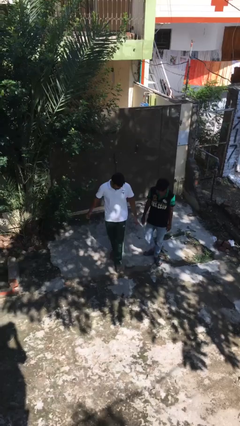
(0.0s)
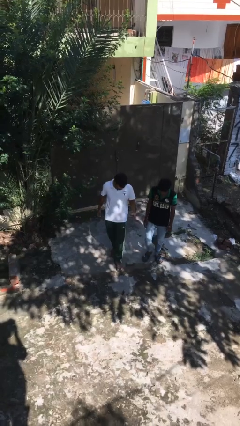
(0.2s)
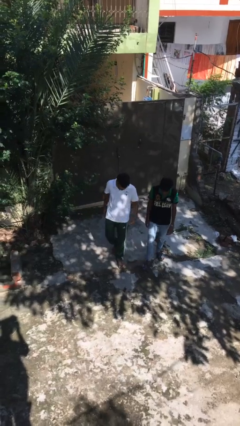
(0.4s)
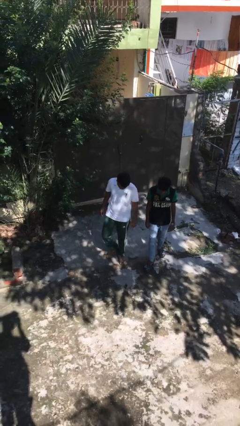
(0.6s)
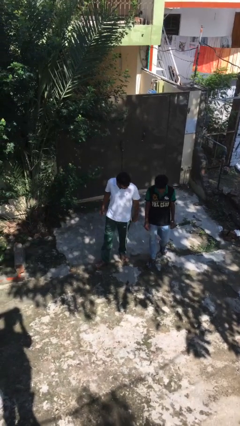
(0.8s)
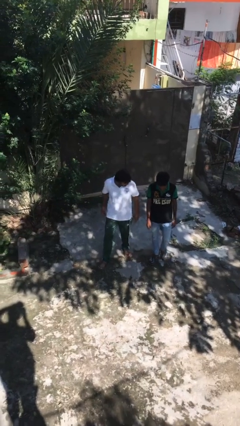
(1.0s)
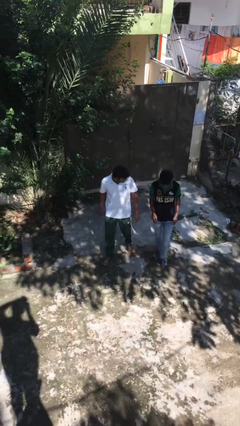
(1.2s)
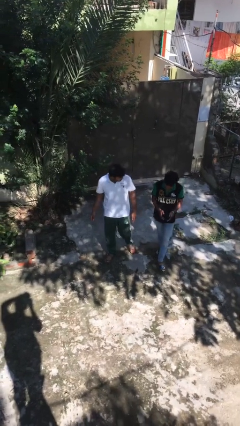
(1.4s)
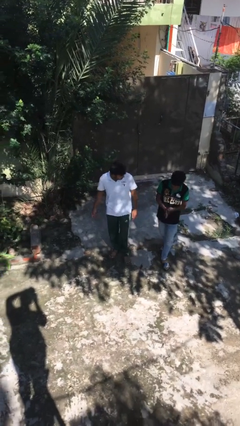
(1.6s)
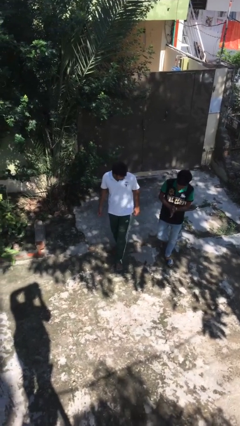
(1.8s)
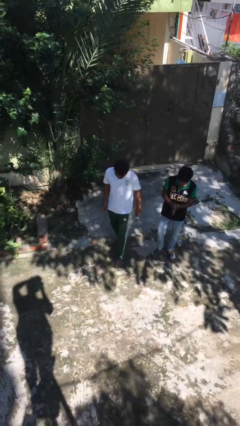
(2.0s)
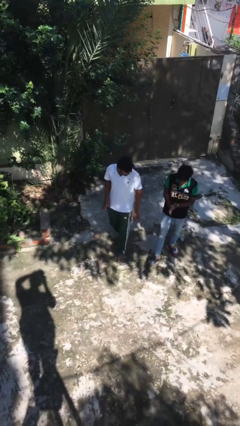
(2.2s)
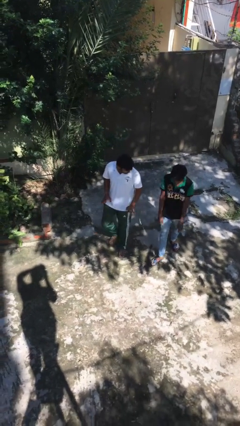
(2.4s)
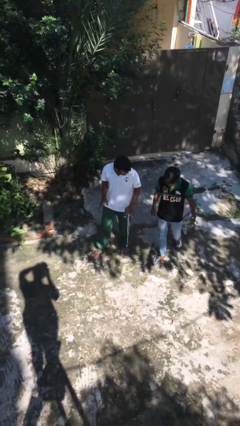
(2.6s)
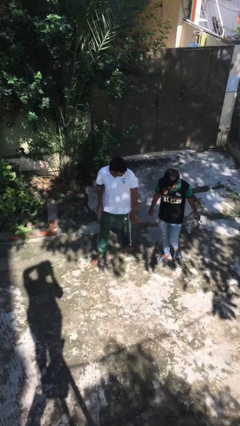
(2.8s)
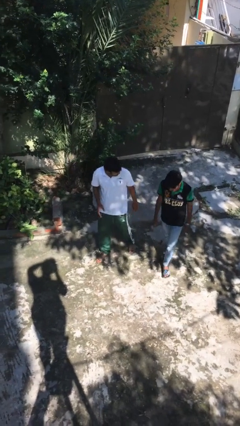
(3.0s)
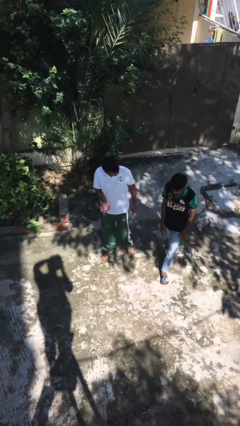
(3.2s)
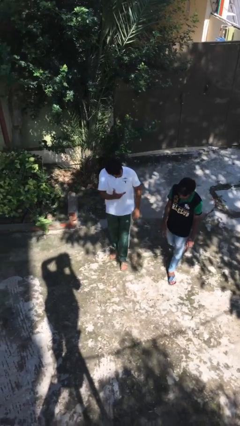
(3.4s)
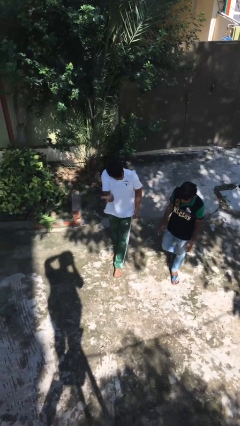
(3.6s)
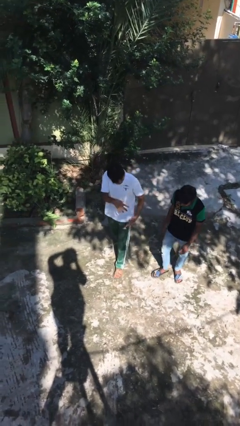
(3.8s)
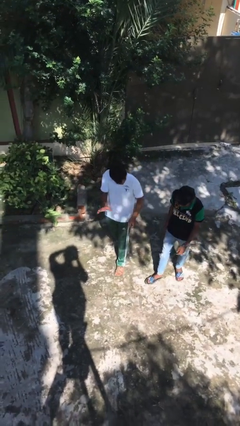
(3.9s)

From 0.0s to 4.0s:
person talks to person

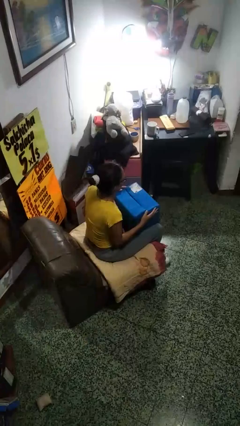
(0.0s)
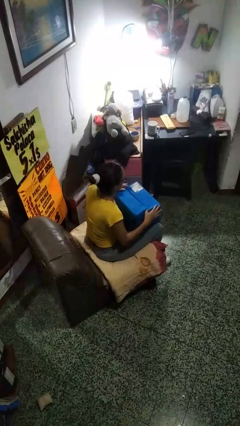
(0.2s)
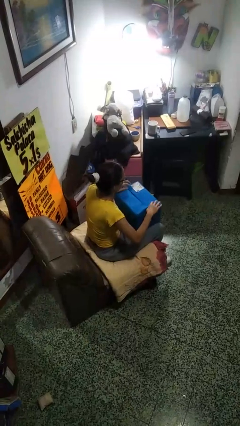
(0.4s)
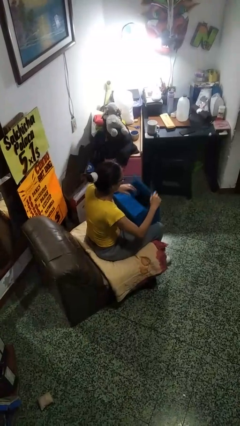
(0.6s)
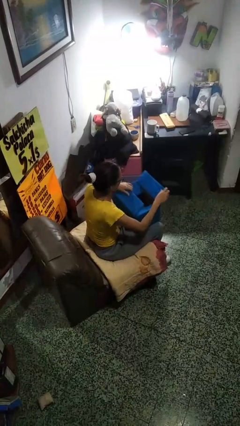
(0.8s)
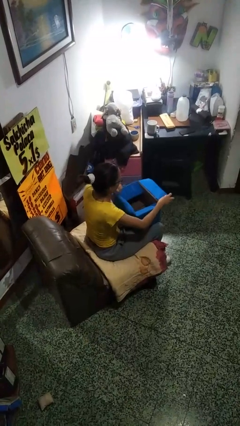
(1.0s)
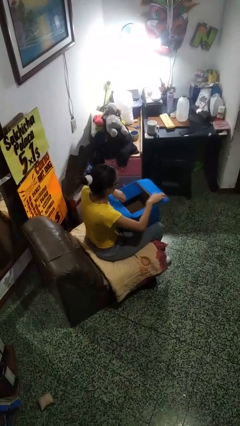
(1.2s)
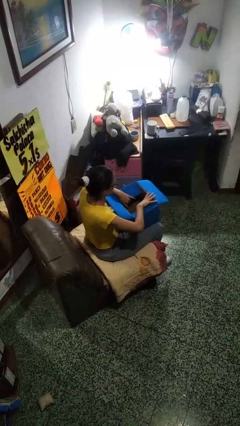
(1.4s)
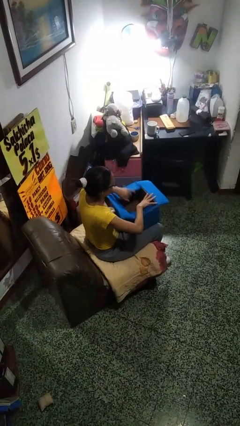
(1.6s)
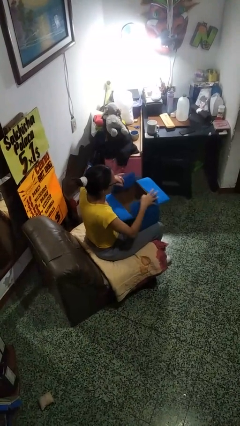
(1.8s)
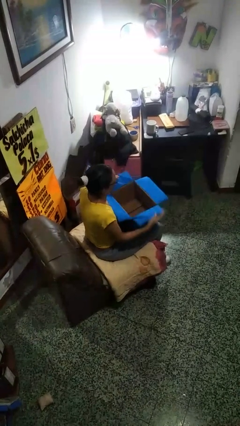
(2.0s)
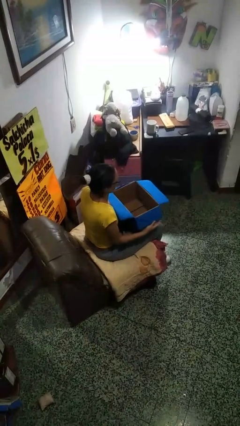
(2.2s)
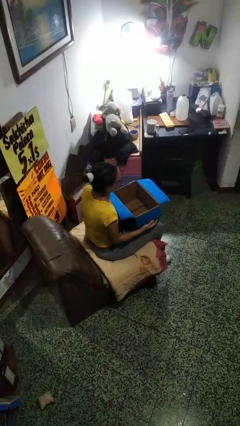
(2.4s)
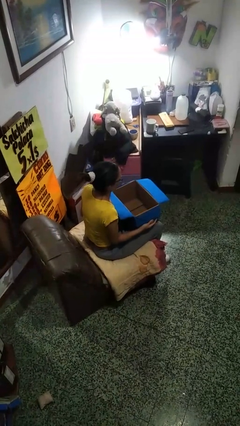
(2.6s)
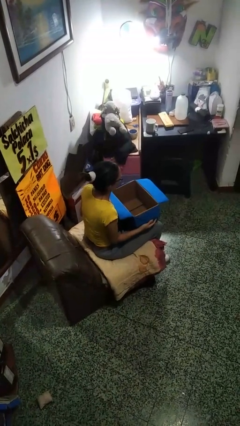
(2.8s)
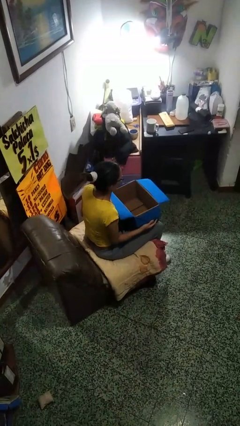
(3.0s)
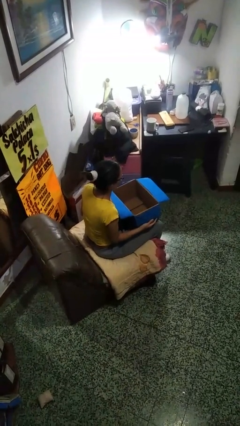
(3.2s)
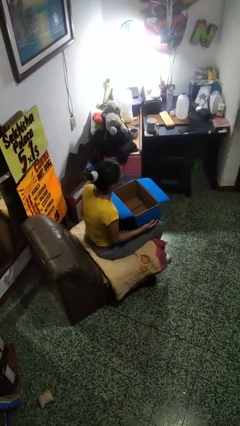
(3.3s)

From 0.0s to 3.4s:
person opens box

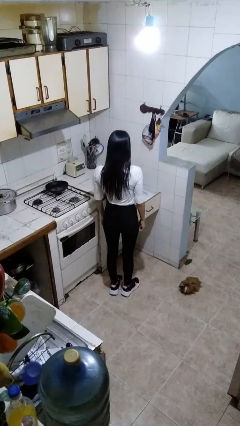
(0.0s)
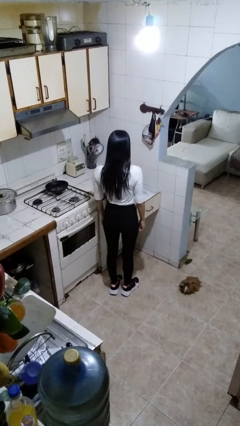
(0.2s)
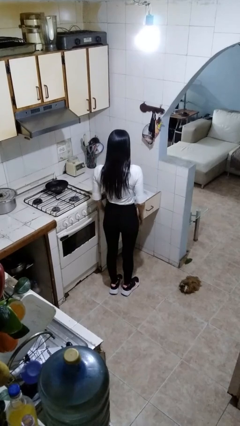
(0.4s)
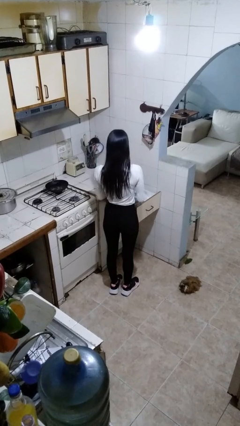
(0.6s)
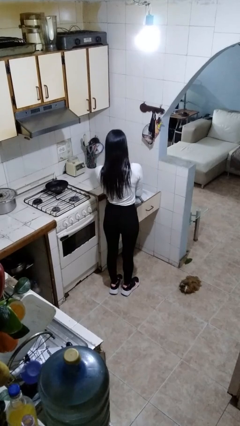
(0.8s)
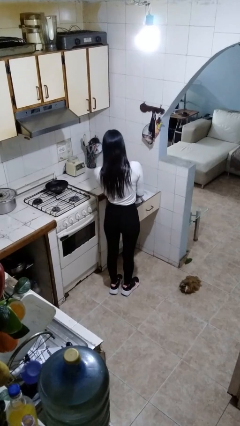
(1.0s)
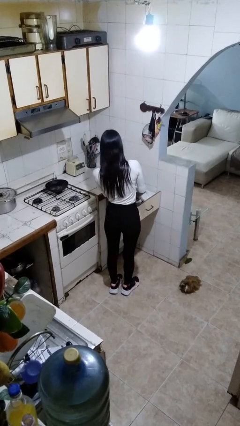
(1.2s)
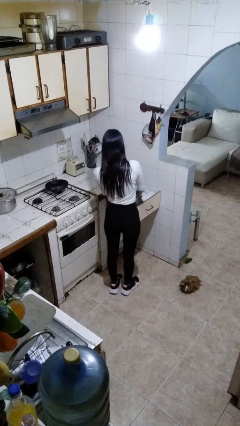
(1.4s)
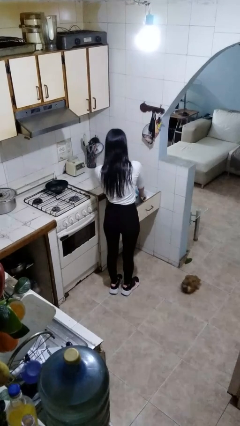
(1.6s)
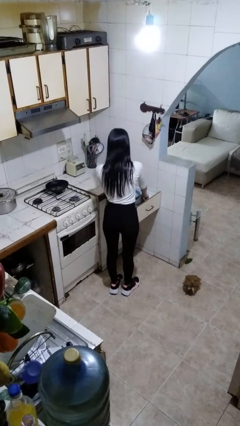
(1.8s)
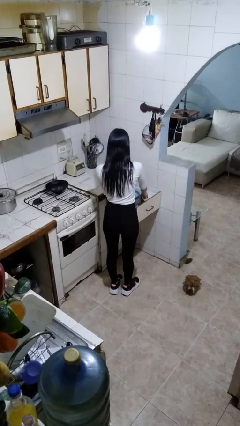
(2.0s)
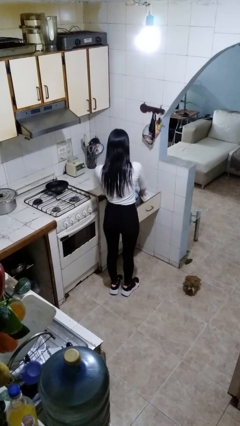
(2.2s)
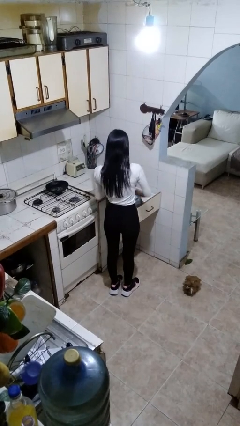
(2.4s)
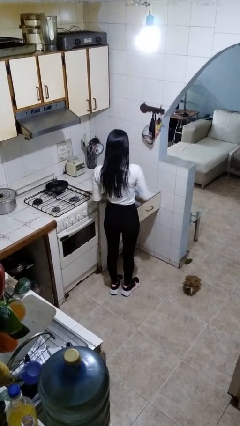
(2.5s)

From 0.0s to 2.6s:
person searches in kitchen drawer

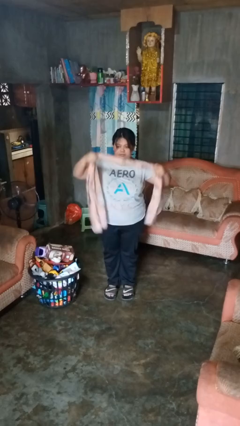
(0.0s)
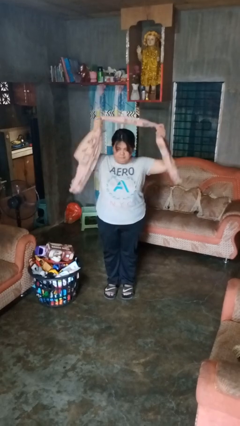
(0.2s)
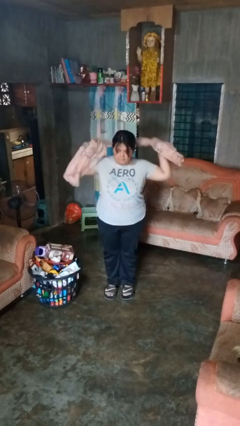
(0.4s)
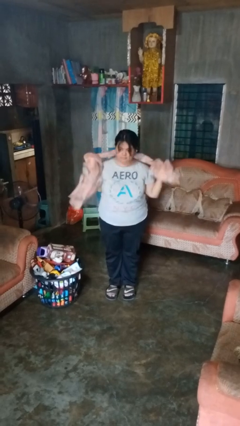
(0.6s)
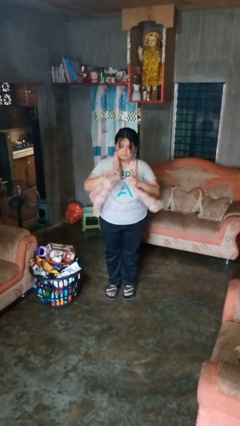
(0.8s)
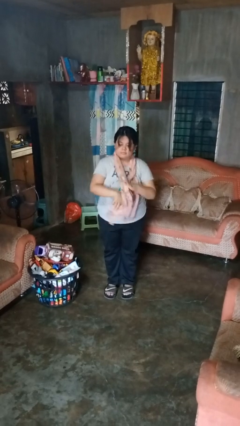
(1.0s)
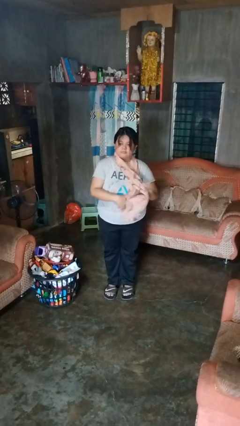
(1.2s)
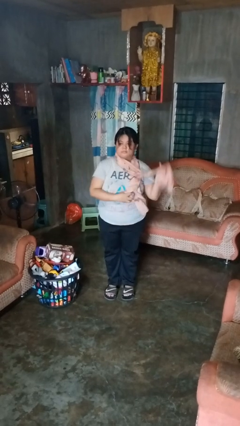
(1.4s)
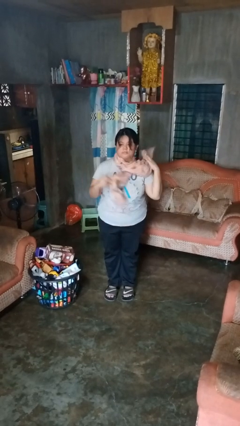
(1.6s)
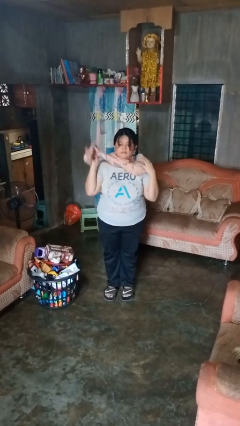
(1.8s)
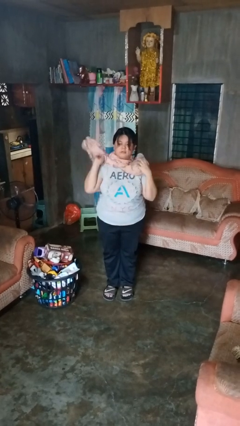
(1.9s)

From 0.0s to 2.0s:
person puts on scarf

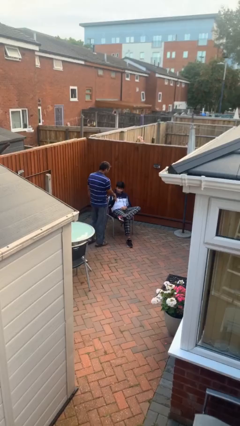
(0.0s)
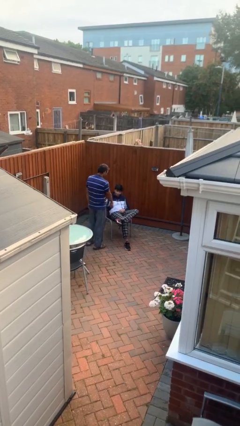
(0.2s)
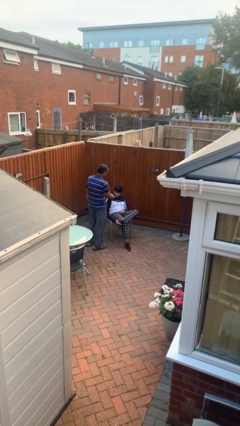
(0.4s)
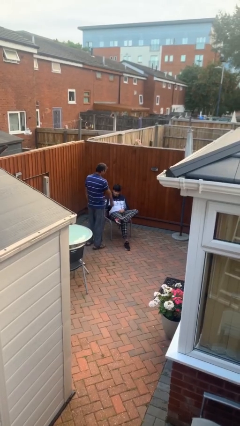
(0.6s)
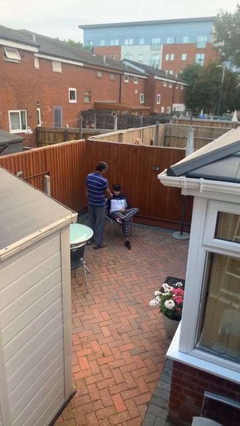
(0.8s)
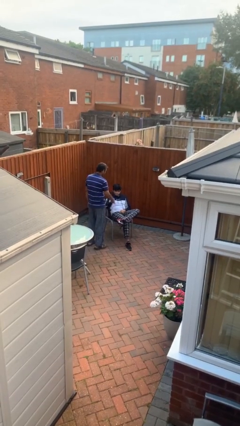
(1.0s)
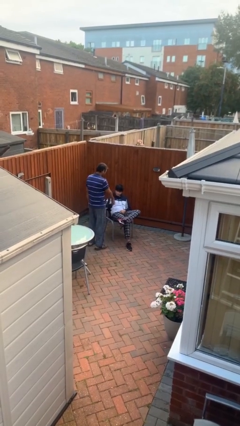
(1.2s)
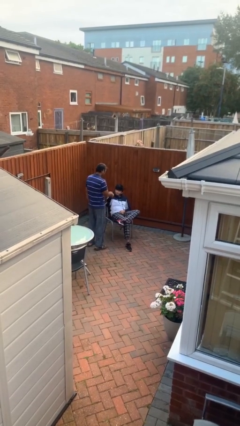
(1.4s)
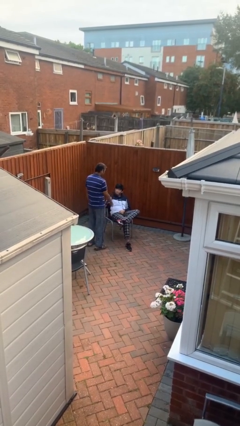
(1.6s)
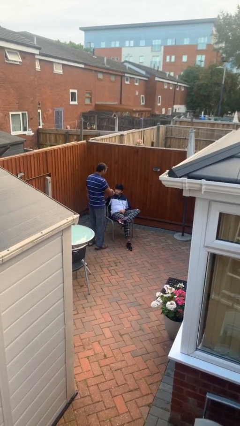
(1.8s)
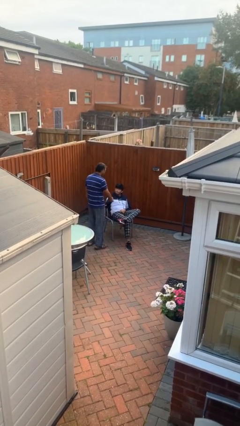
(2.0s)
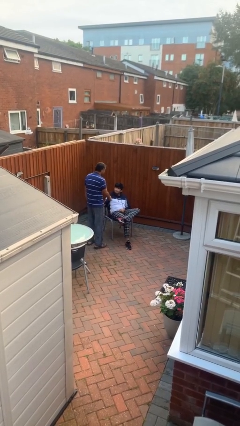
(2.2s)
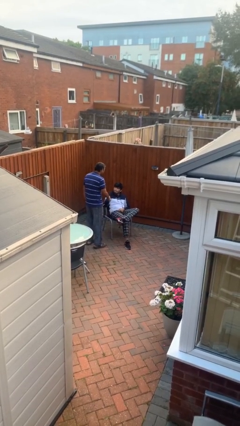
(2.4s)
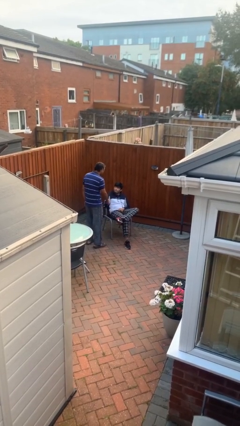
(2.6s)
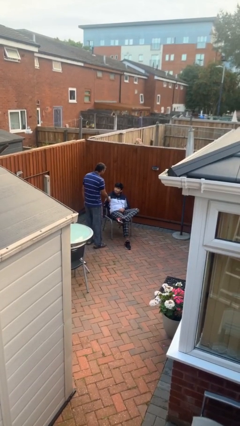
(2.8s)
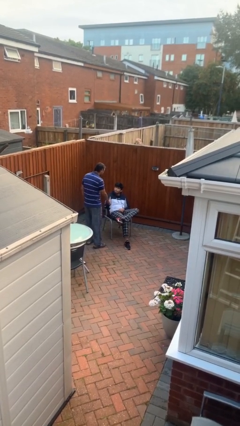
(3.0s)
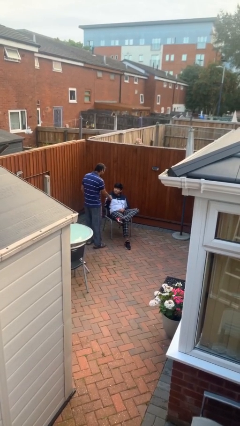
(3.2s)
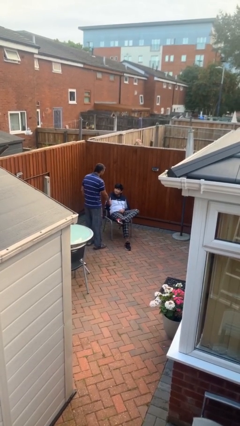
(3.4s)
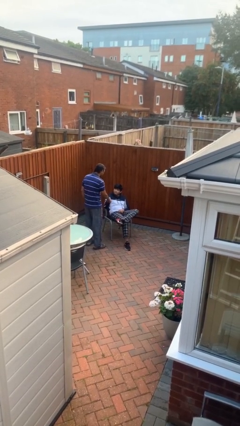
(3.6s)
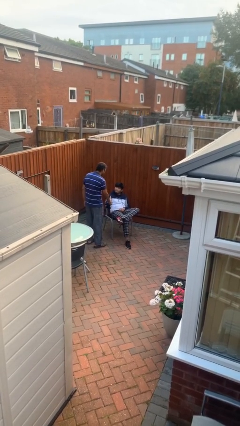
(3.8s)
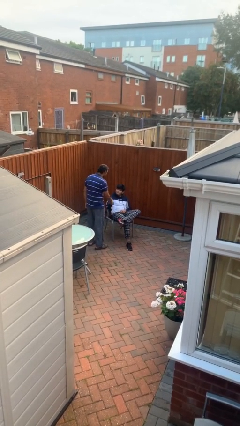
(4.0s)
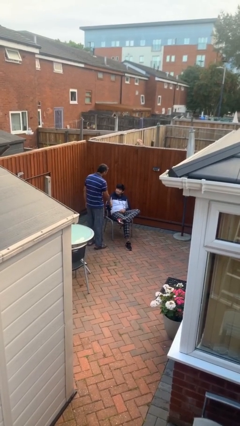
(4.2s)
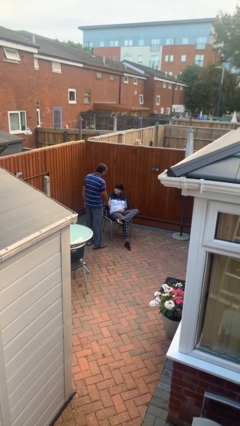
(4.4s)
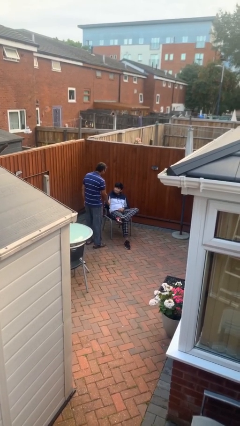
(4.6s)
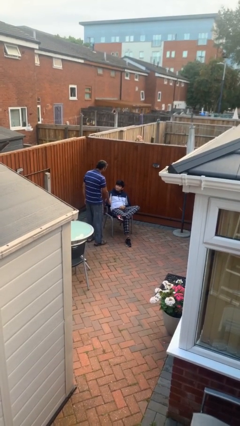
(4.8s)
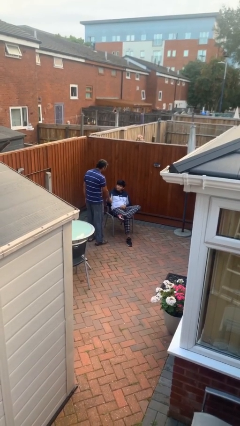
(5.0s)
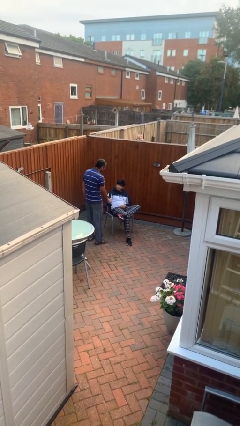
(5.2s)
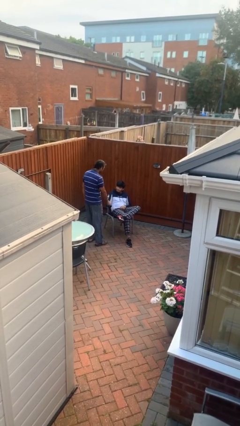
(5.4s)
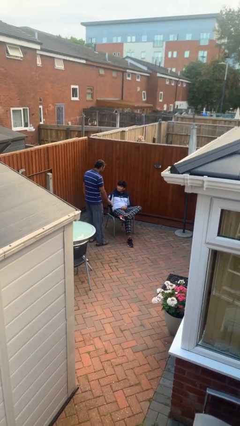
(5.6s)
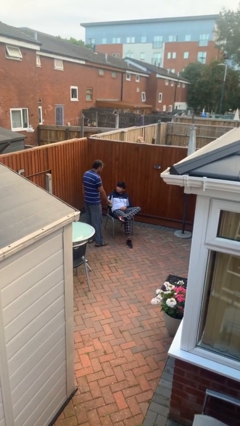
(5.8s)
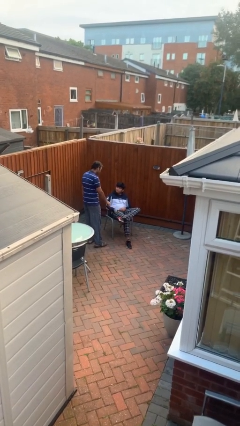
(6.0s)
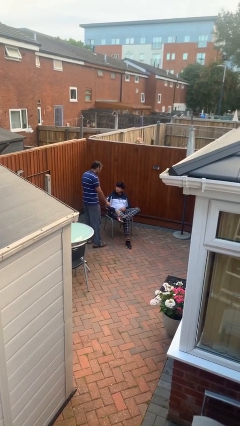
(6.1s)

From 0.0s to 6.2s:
person shakes hand
